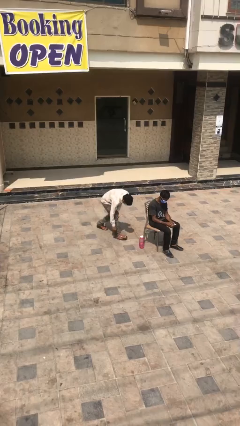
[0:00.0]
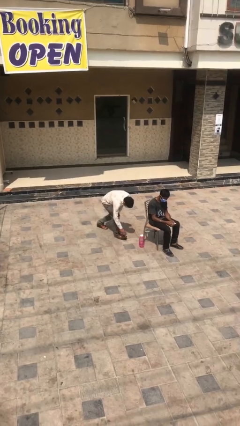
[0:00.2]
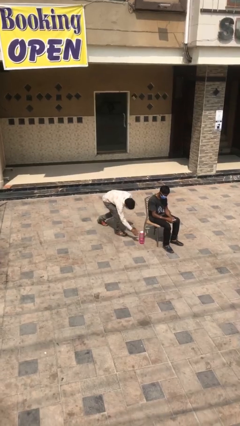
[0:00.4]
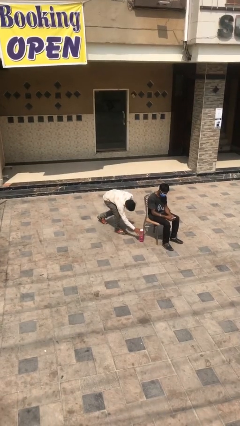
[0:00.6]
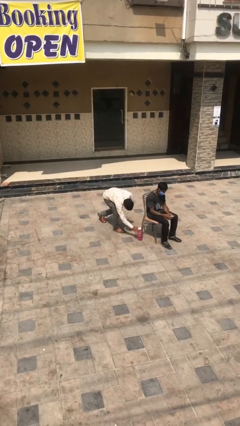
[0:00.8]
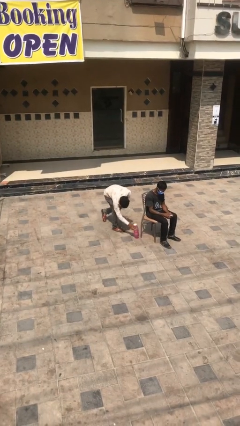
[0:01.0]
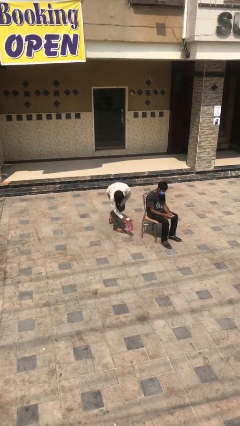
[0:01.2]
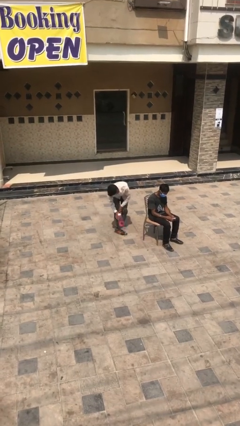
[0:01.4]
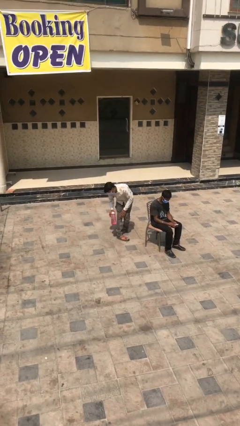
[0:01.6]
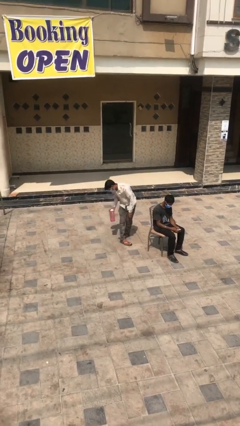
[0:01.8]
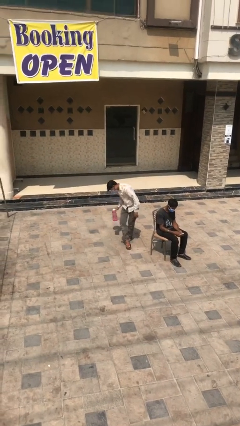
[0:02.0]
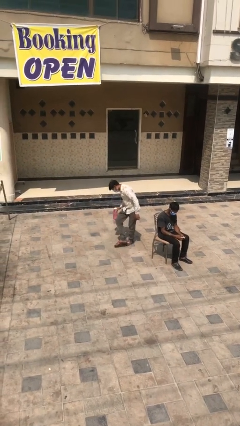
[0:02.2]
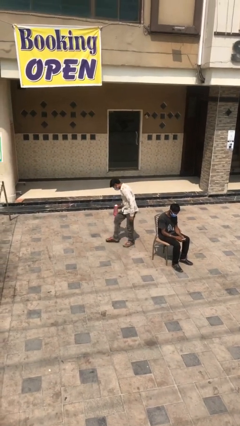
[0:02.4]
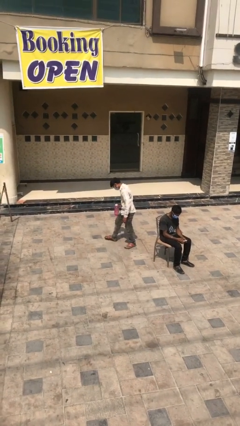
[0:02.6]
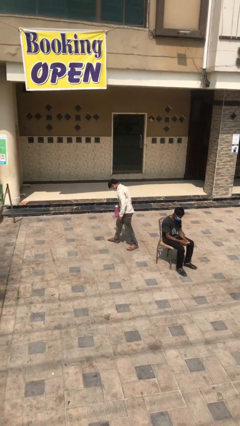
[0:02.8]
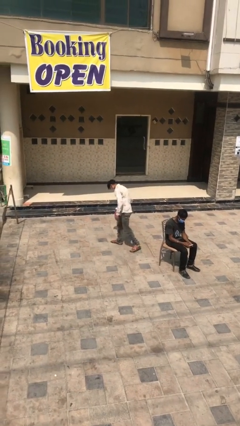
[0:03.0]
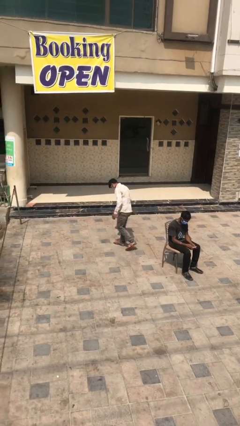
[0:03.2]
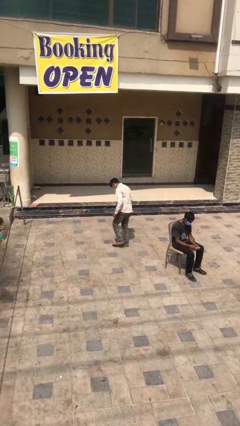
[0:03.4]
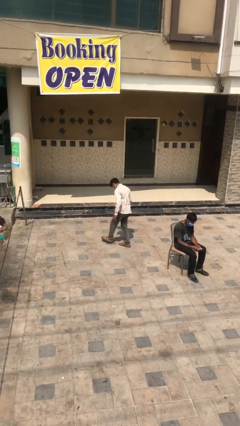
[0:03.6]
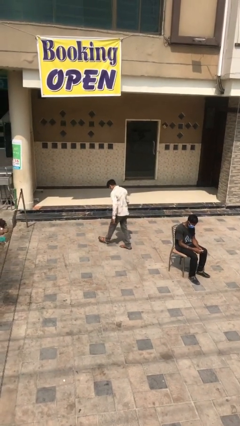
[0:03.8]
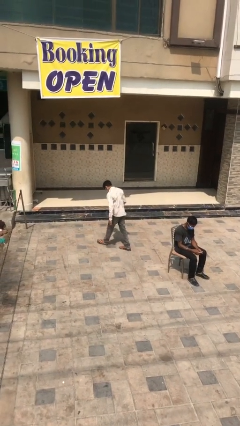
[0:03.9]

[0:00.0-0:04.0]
person steals object from person

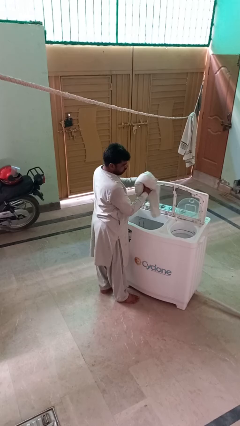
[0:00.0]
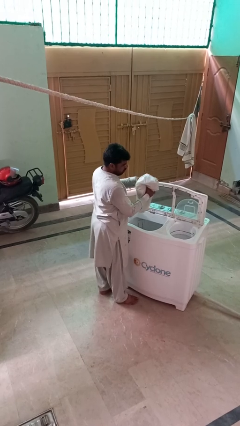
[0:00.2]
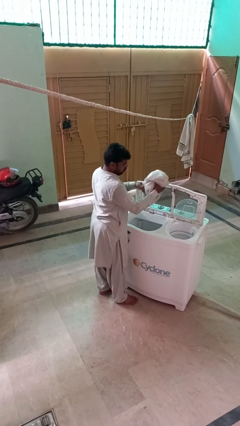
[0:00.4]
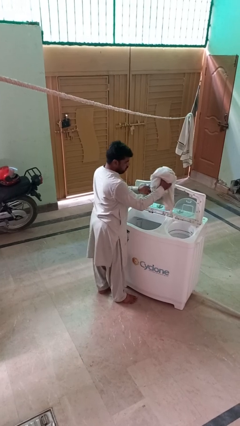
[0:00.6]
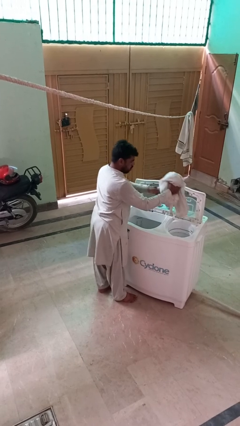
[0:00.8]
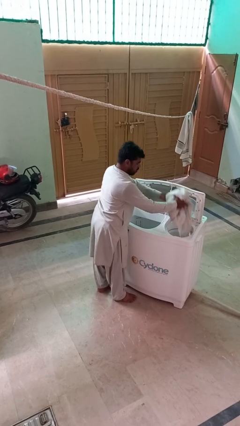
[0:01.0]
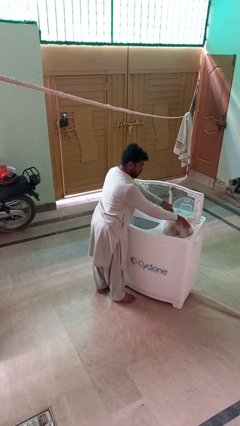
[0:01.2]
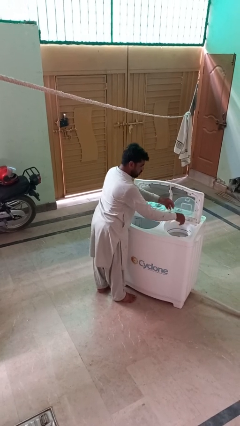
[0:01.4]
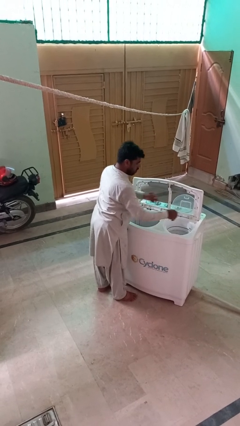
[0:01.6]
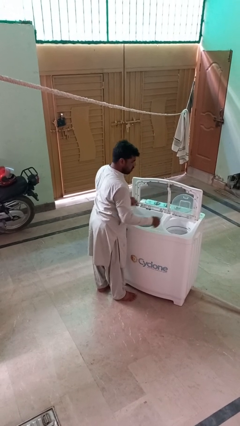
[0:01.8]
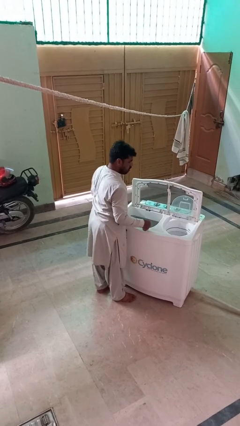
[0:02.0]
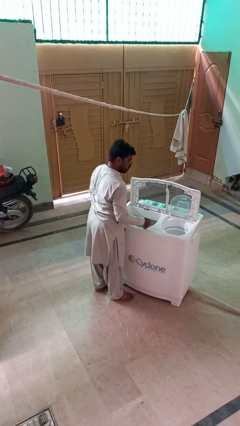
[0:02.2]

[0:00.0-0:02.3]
person loads dryer

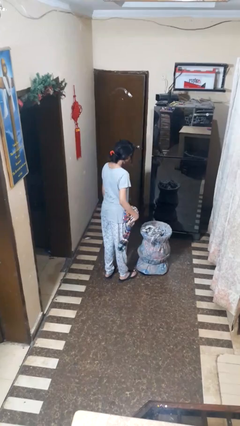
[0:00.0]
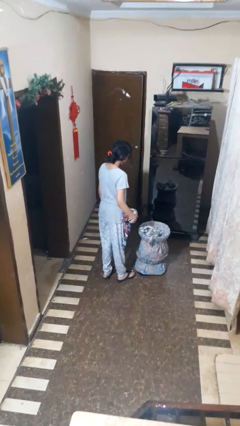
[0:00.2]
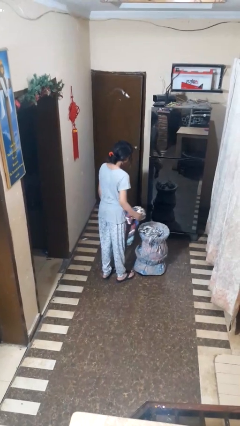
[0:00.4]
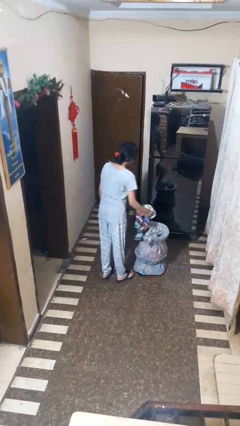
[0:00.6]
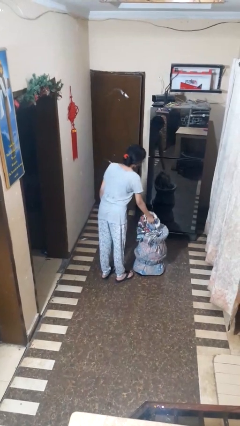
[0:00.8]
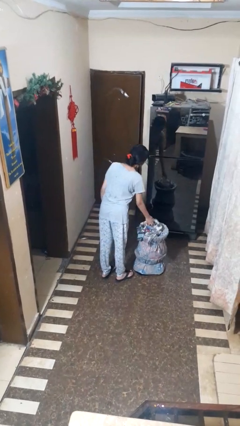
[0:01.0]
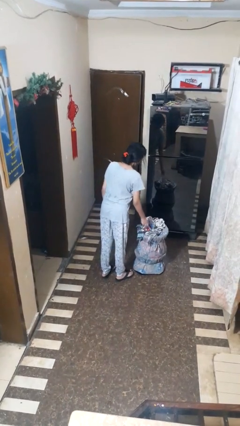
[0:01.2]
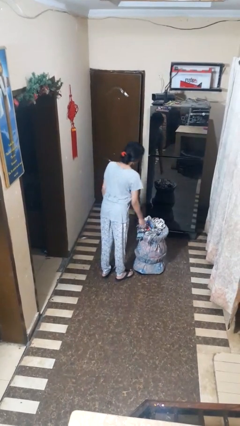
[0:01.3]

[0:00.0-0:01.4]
person puts object into basket

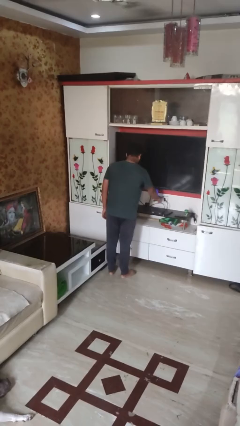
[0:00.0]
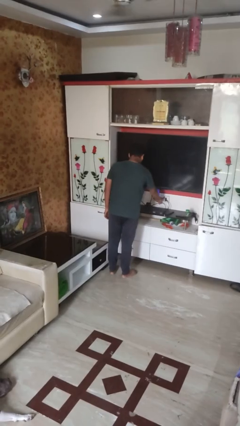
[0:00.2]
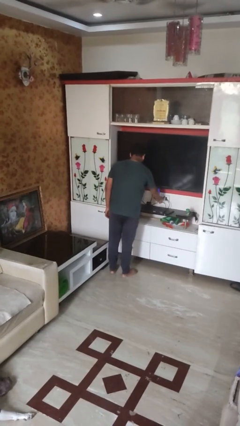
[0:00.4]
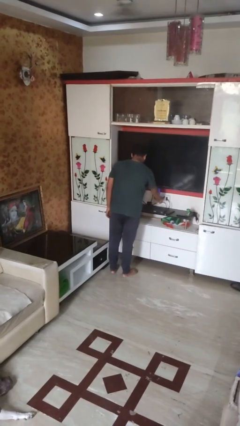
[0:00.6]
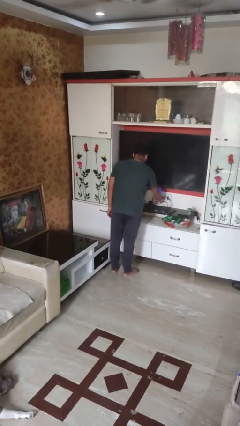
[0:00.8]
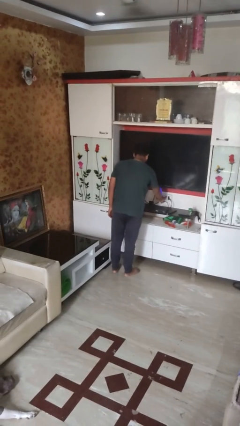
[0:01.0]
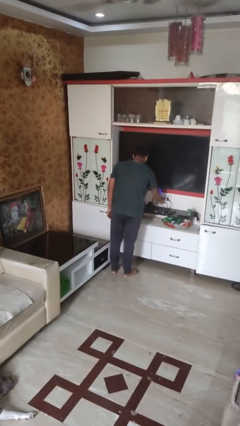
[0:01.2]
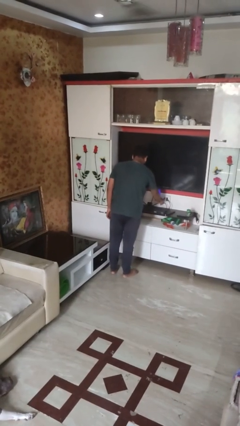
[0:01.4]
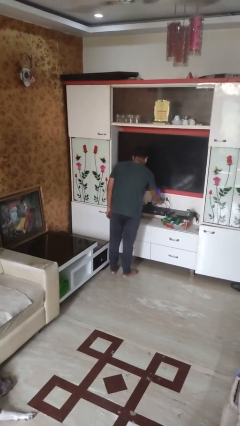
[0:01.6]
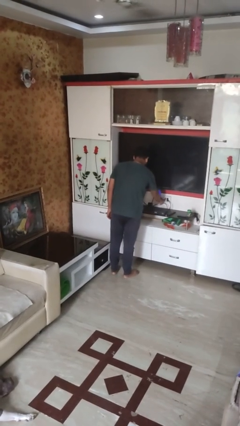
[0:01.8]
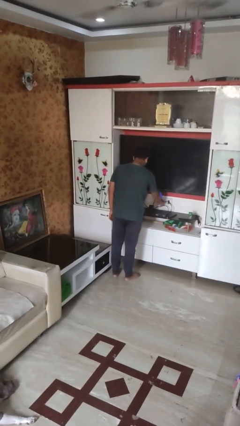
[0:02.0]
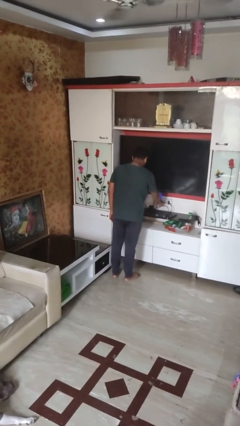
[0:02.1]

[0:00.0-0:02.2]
person turns off lamp

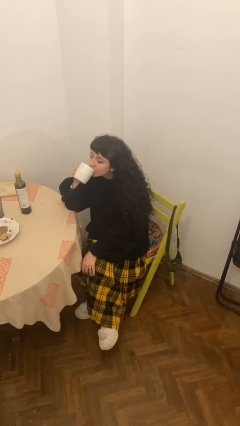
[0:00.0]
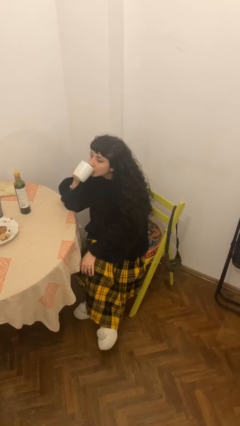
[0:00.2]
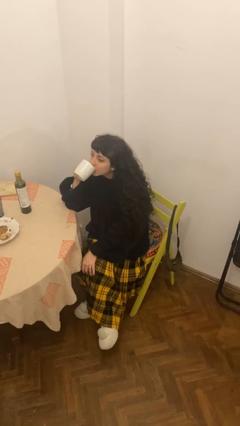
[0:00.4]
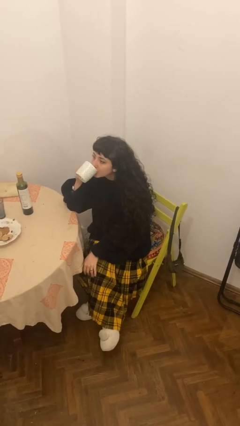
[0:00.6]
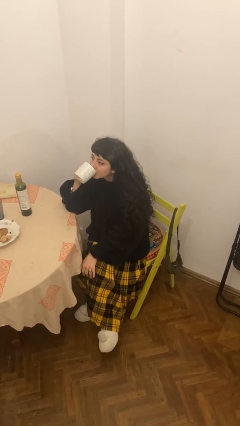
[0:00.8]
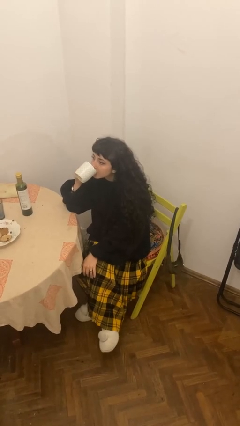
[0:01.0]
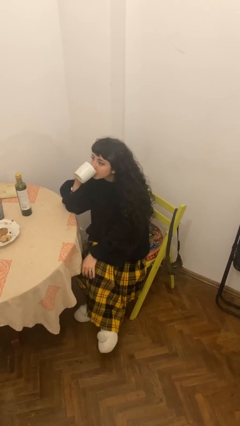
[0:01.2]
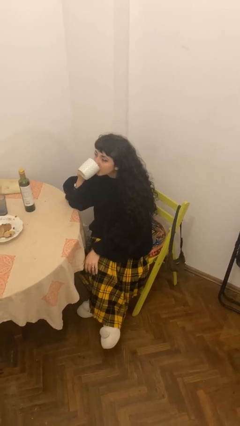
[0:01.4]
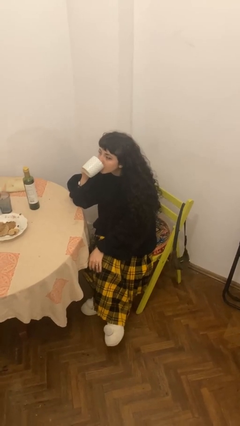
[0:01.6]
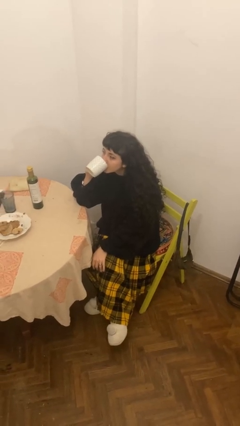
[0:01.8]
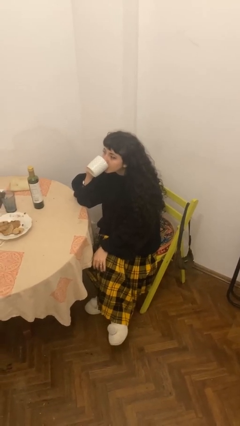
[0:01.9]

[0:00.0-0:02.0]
person drinks from mug

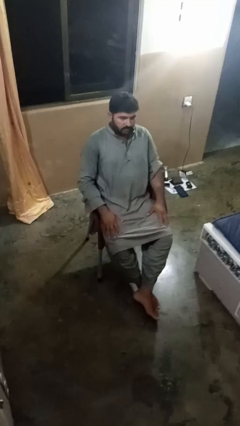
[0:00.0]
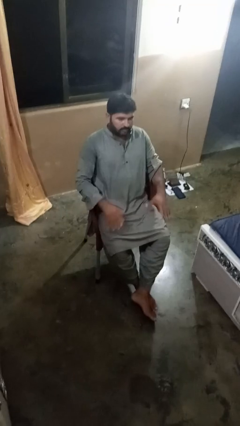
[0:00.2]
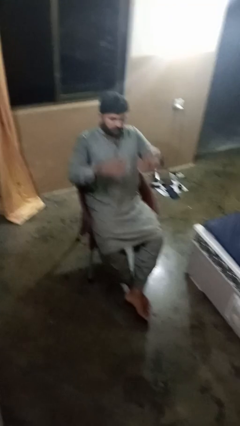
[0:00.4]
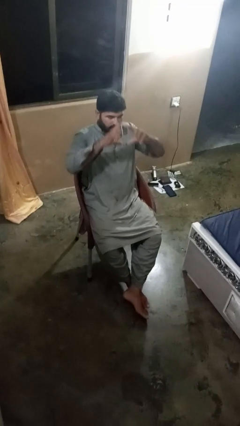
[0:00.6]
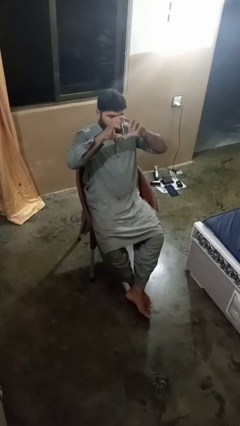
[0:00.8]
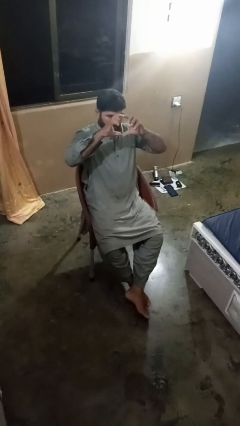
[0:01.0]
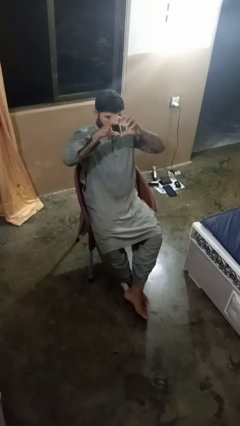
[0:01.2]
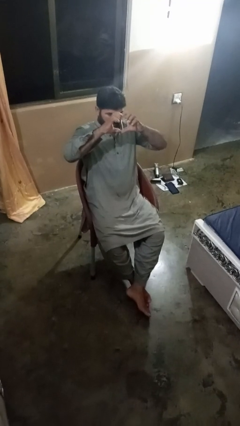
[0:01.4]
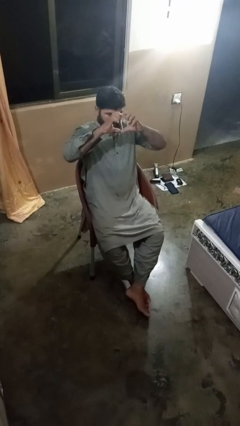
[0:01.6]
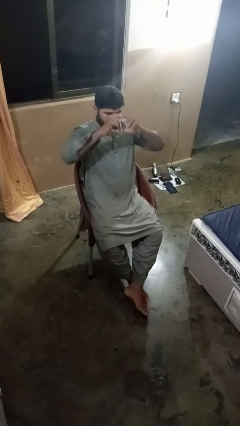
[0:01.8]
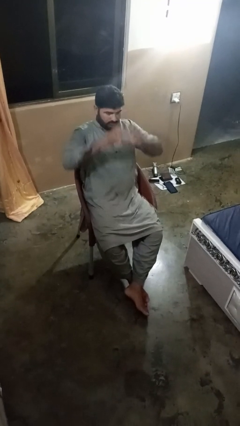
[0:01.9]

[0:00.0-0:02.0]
person gestures heart

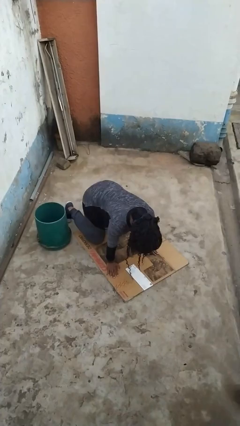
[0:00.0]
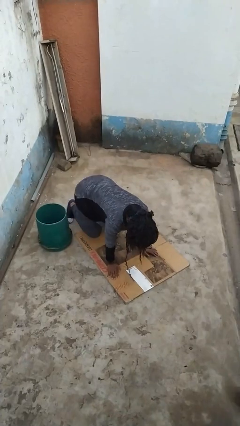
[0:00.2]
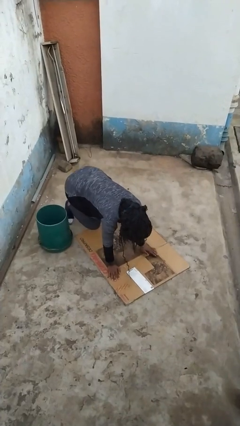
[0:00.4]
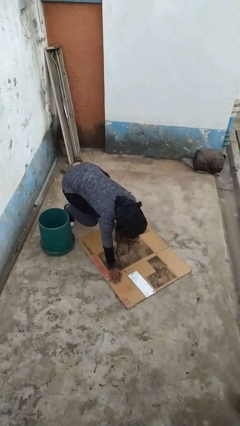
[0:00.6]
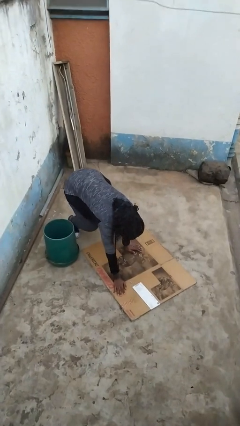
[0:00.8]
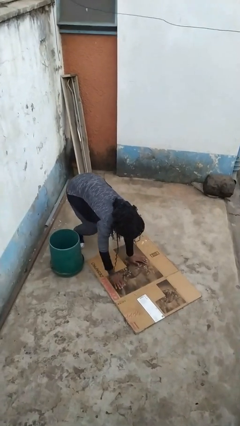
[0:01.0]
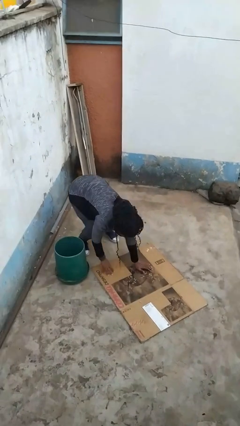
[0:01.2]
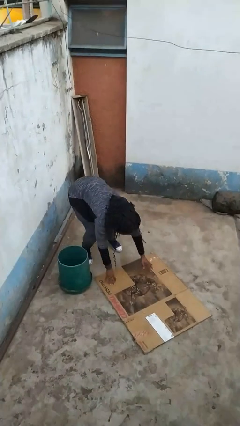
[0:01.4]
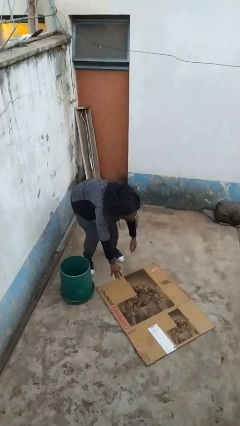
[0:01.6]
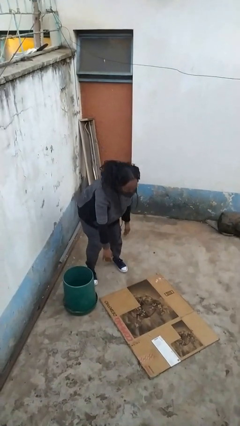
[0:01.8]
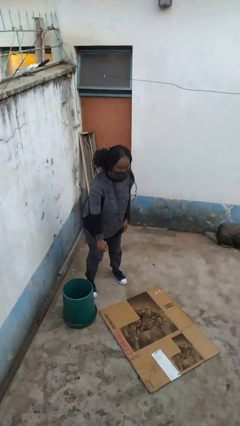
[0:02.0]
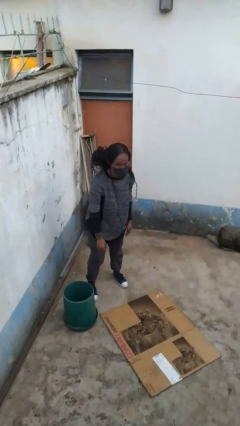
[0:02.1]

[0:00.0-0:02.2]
person stands up from floor

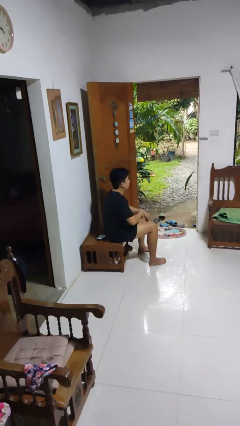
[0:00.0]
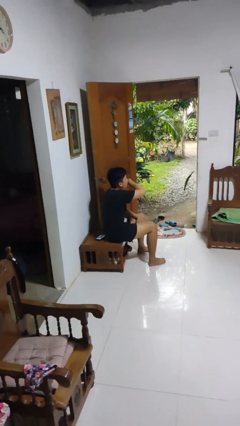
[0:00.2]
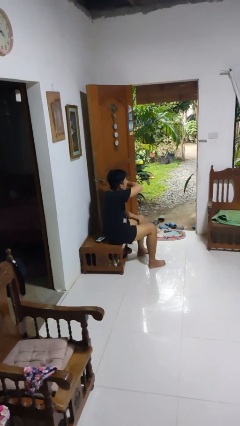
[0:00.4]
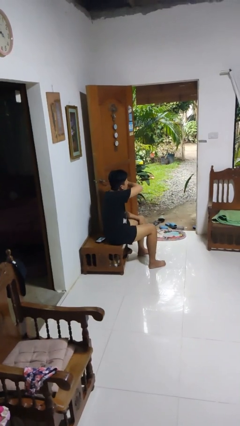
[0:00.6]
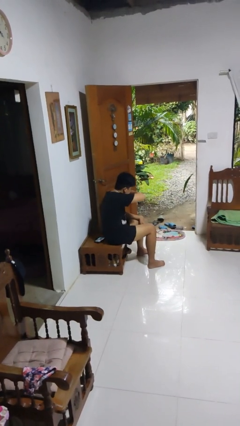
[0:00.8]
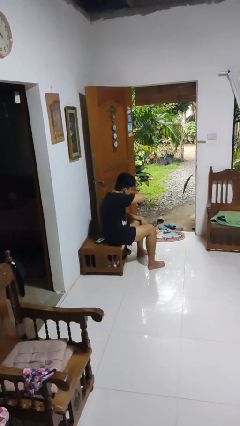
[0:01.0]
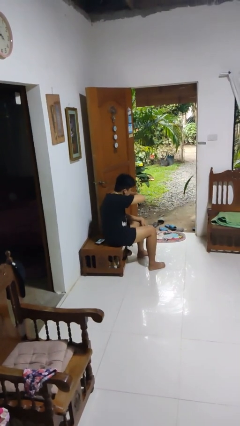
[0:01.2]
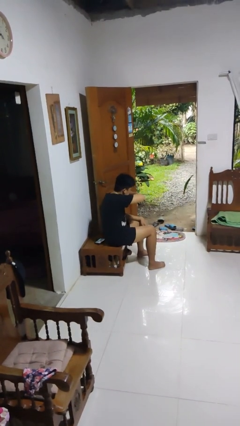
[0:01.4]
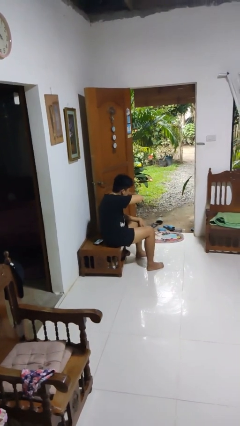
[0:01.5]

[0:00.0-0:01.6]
person sneezes into arm
